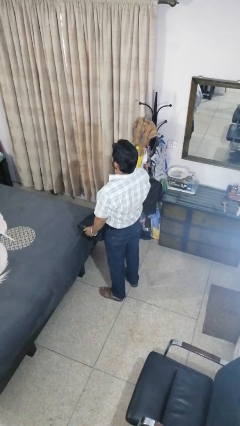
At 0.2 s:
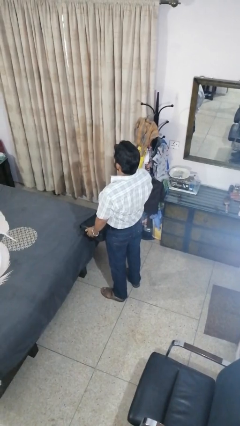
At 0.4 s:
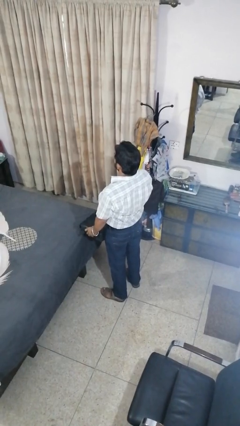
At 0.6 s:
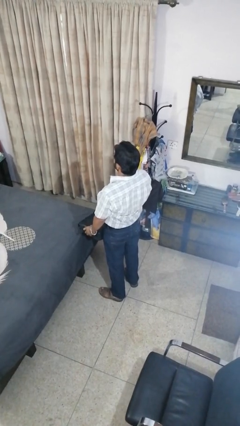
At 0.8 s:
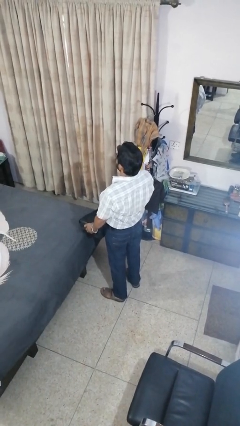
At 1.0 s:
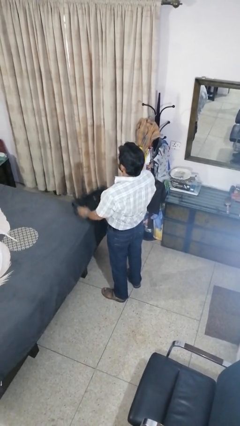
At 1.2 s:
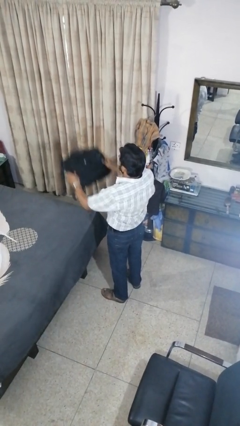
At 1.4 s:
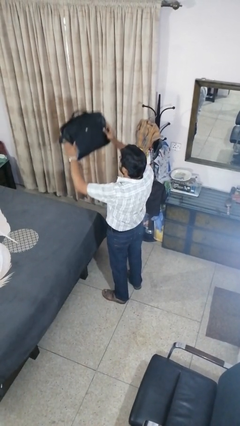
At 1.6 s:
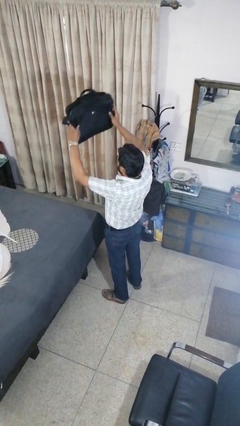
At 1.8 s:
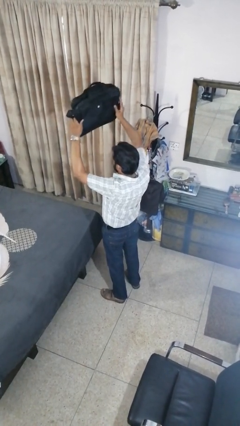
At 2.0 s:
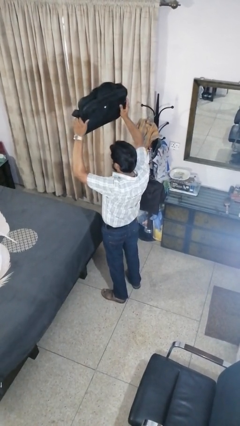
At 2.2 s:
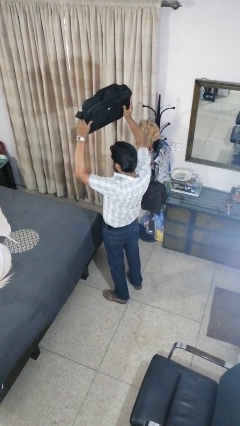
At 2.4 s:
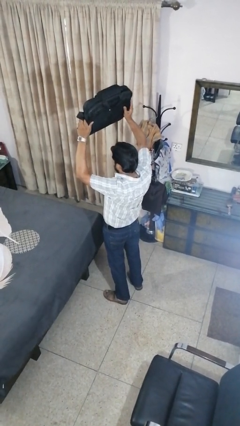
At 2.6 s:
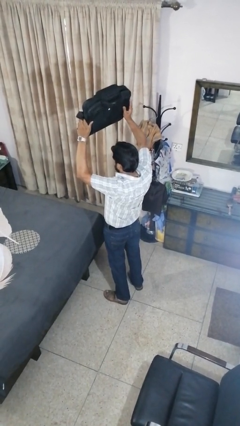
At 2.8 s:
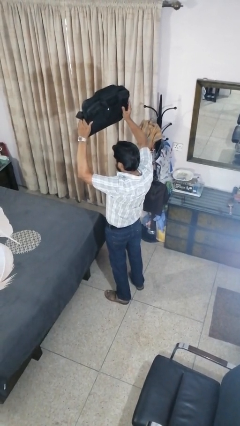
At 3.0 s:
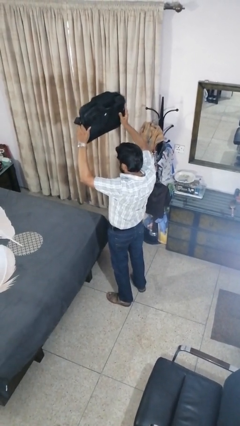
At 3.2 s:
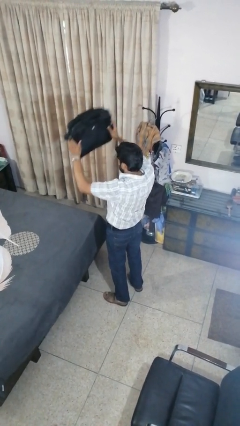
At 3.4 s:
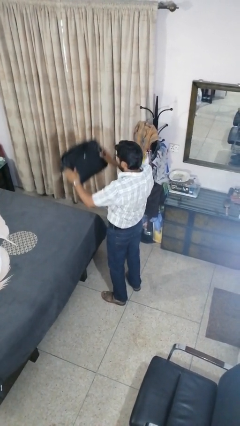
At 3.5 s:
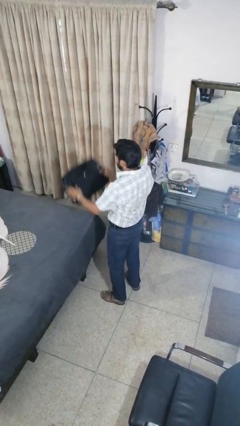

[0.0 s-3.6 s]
person holds object above head

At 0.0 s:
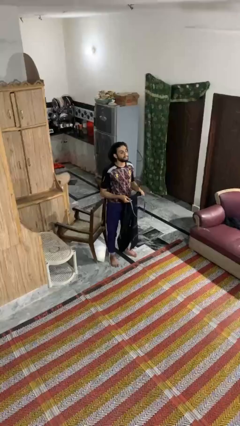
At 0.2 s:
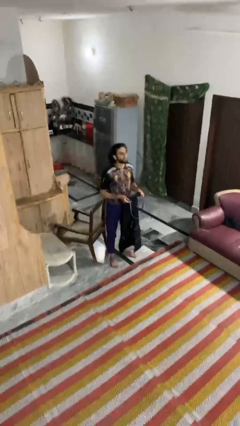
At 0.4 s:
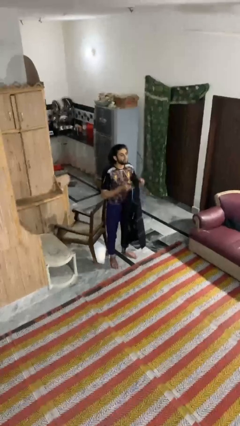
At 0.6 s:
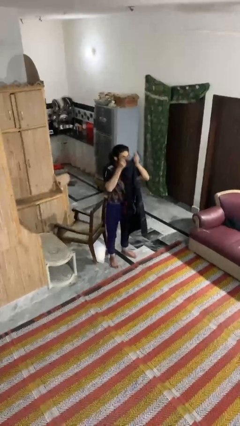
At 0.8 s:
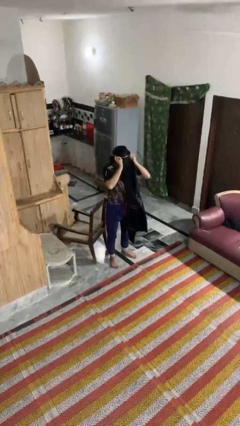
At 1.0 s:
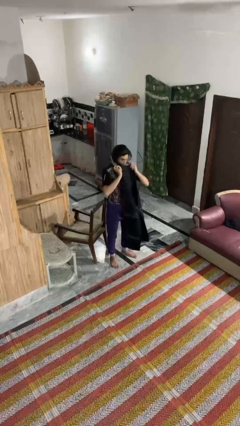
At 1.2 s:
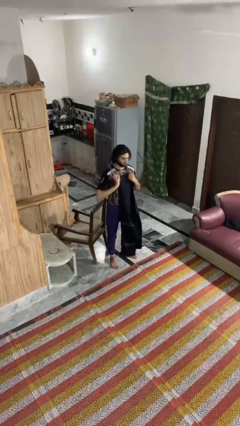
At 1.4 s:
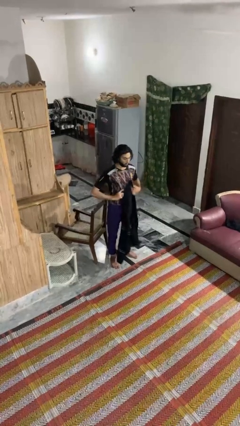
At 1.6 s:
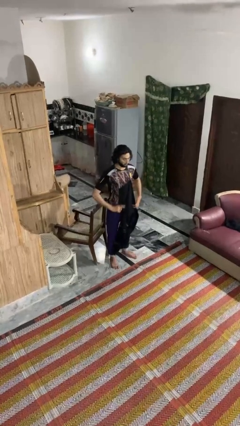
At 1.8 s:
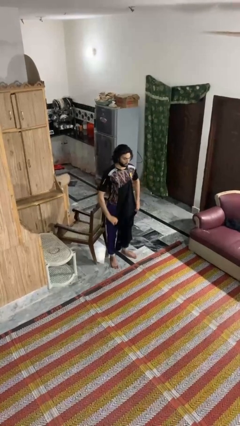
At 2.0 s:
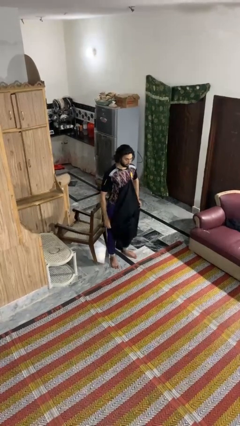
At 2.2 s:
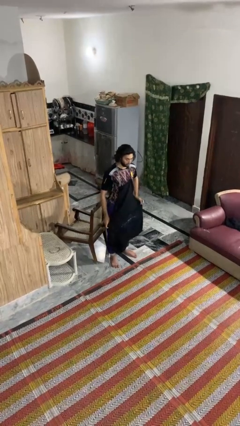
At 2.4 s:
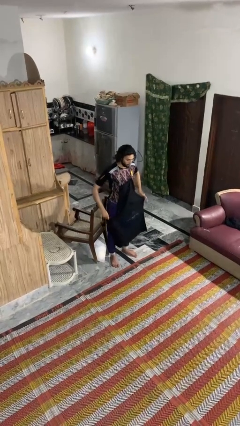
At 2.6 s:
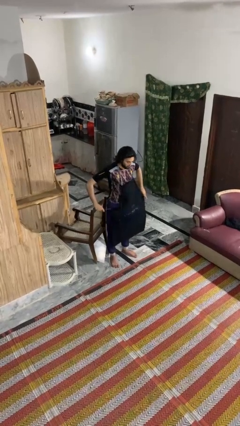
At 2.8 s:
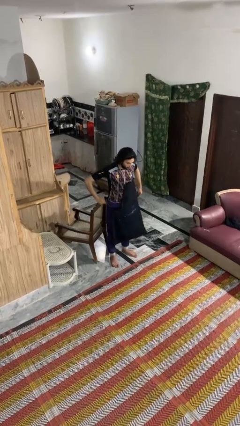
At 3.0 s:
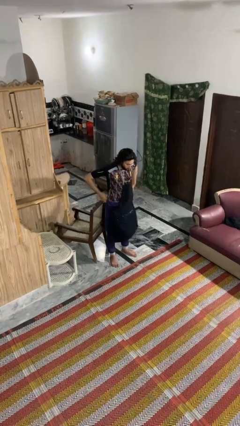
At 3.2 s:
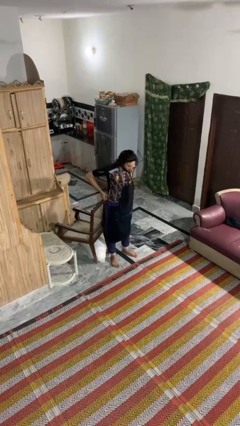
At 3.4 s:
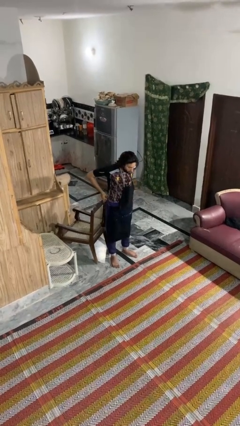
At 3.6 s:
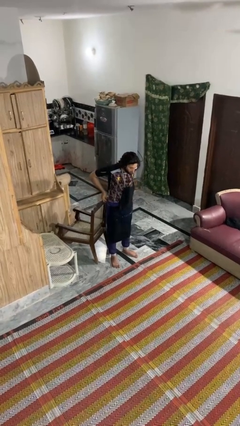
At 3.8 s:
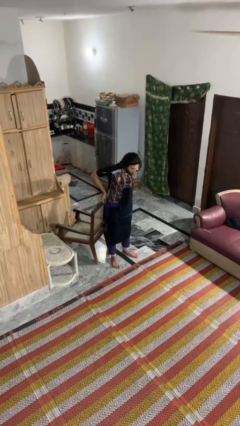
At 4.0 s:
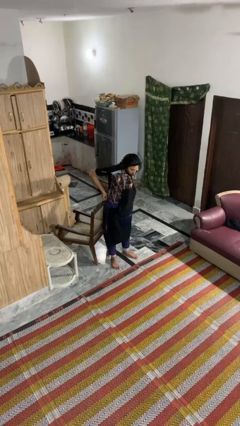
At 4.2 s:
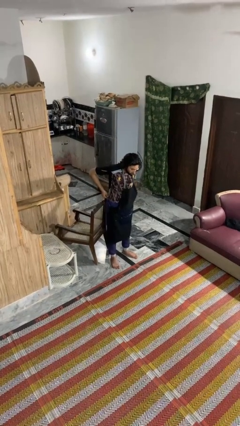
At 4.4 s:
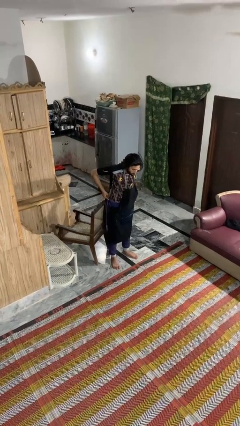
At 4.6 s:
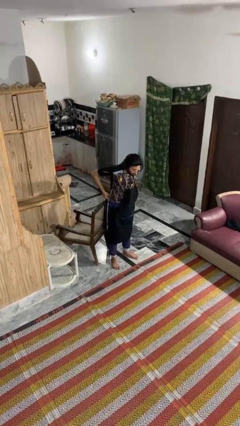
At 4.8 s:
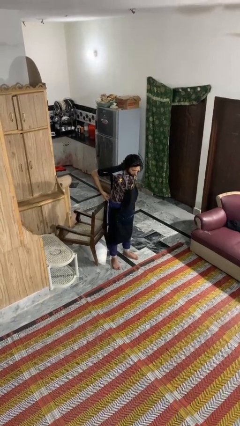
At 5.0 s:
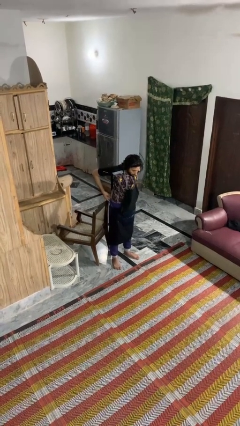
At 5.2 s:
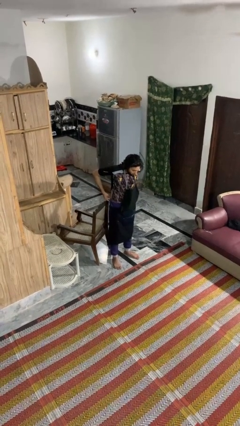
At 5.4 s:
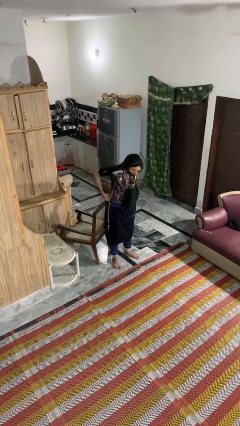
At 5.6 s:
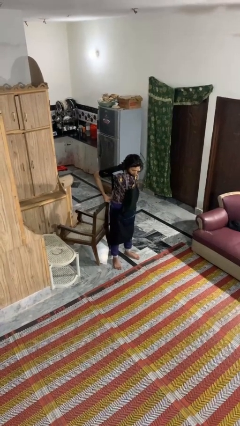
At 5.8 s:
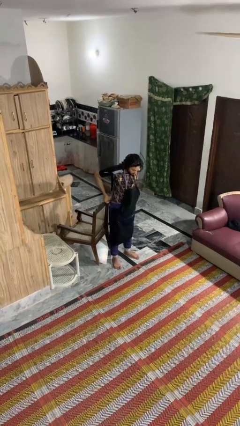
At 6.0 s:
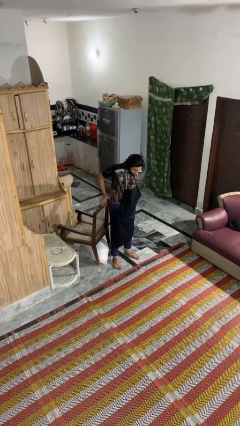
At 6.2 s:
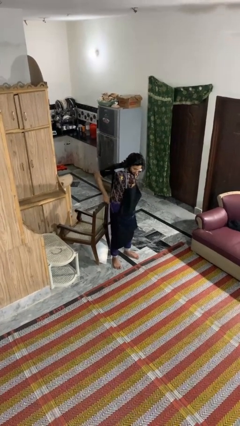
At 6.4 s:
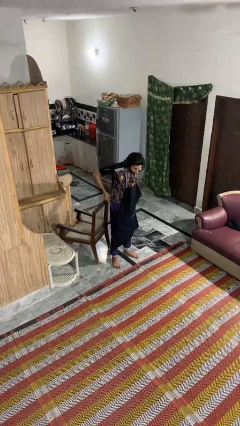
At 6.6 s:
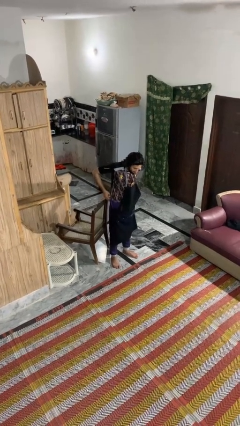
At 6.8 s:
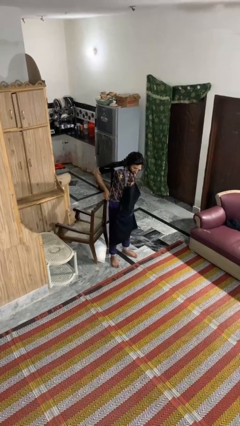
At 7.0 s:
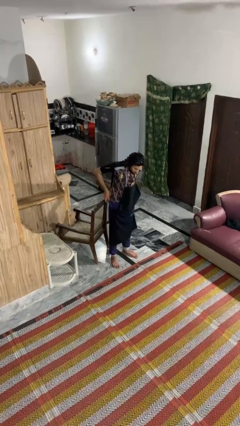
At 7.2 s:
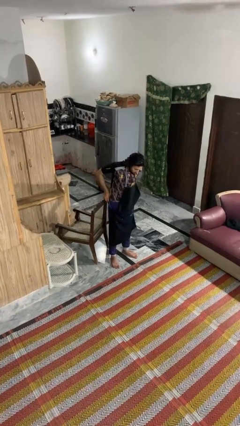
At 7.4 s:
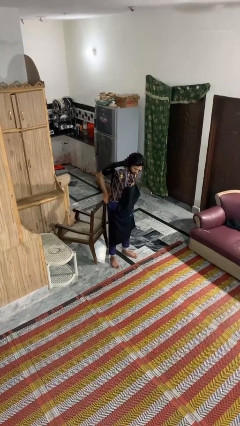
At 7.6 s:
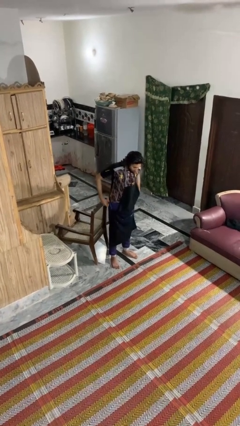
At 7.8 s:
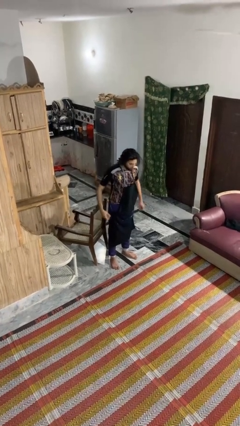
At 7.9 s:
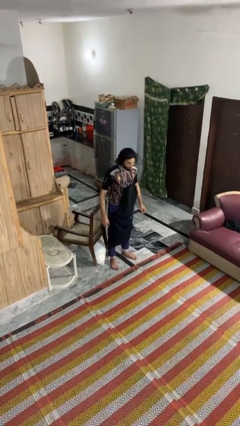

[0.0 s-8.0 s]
person puts on apron

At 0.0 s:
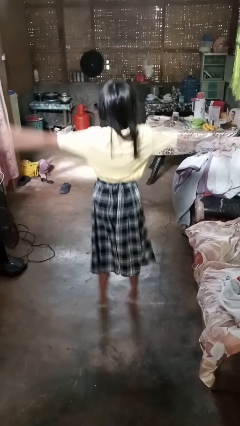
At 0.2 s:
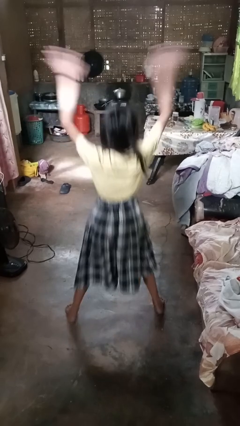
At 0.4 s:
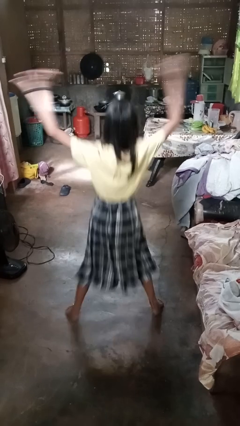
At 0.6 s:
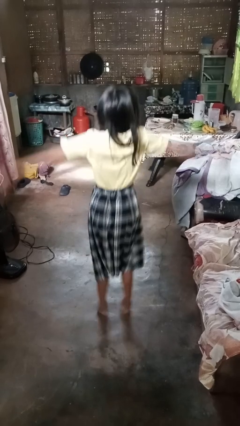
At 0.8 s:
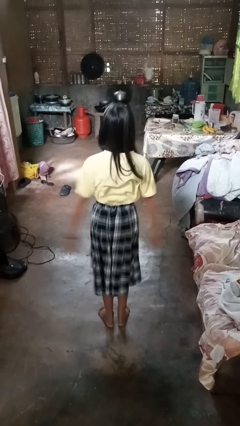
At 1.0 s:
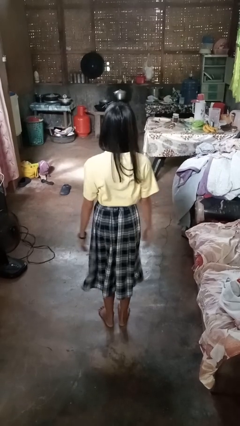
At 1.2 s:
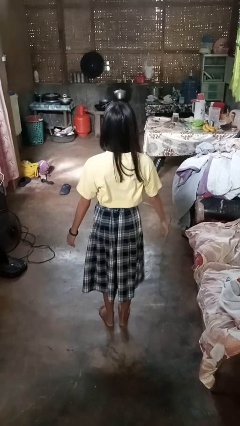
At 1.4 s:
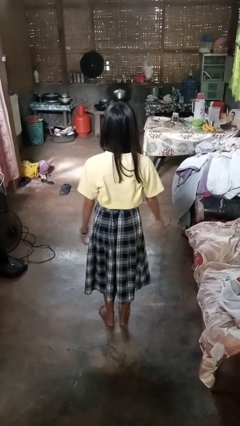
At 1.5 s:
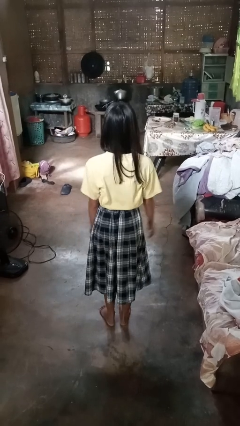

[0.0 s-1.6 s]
person exercises with jumping jacks

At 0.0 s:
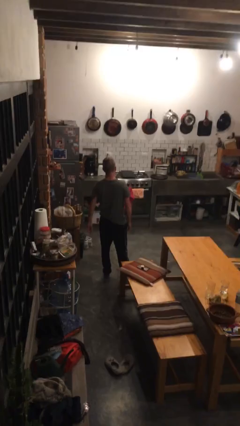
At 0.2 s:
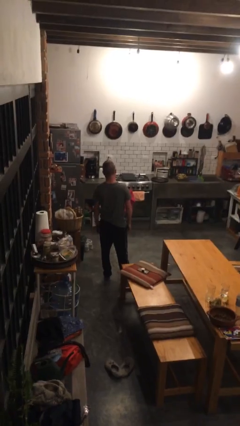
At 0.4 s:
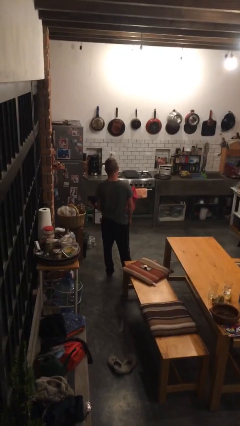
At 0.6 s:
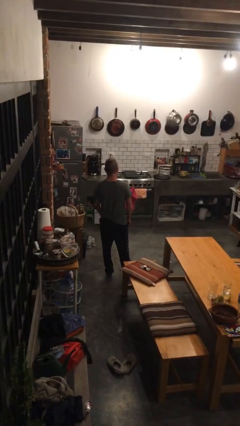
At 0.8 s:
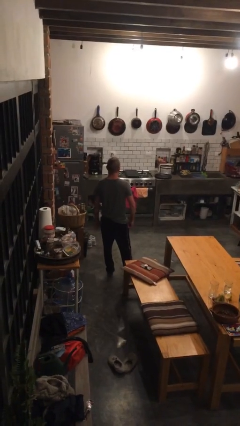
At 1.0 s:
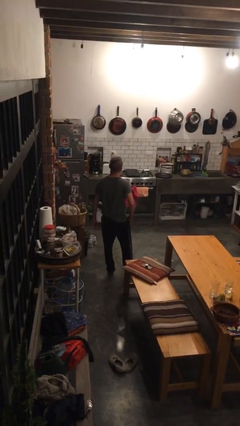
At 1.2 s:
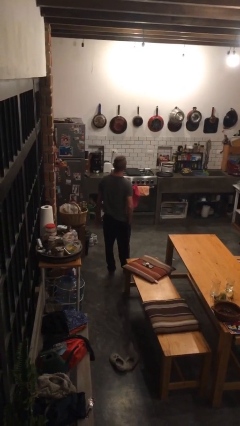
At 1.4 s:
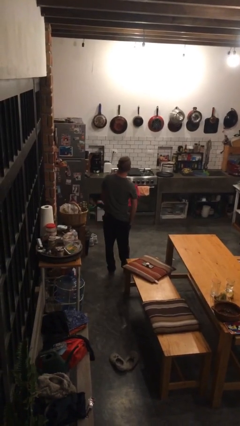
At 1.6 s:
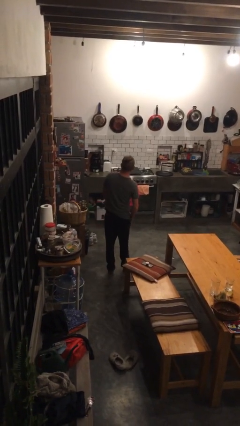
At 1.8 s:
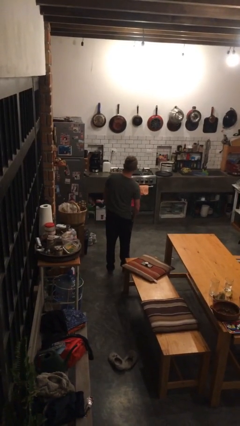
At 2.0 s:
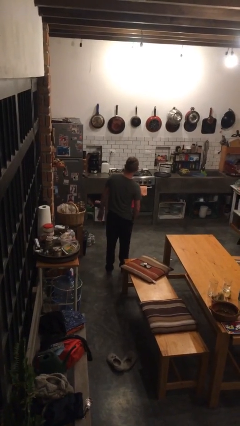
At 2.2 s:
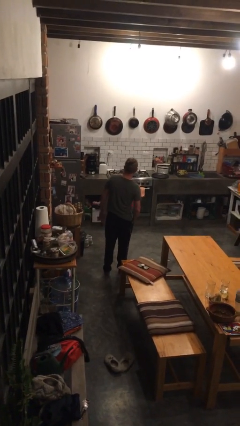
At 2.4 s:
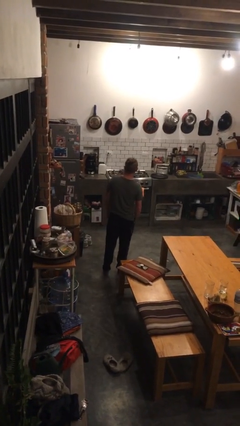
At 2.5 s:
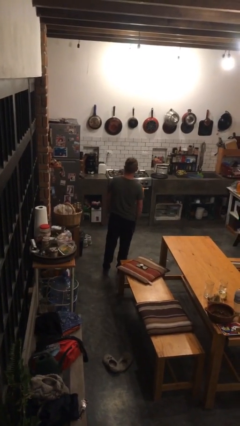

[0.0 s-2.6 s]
person puts hands in back pockets

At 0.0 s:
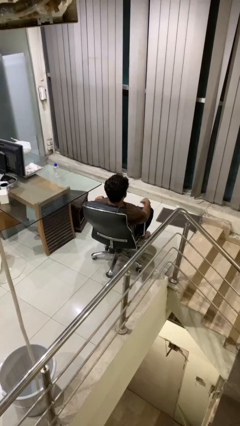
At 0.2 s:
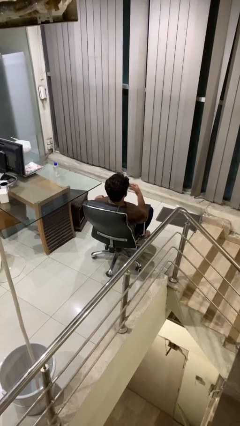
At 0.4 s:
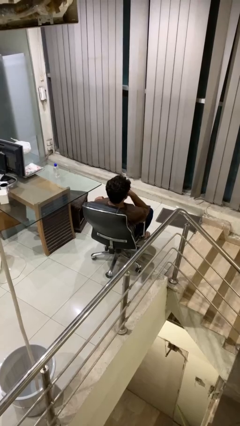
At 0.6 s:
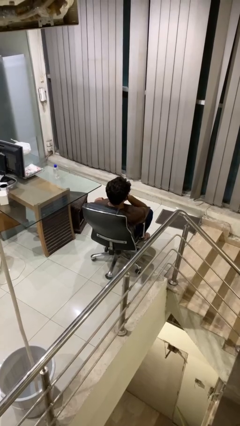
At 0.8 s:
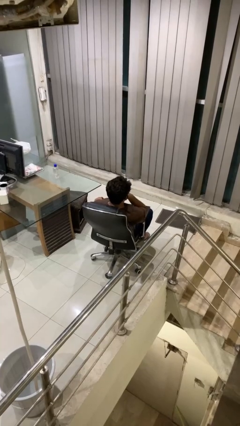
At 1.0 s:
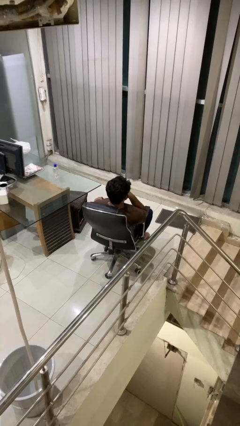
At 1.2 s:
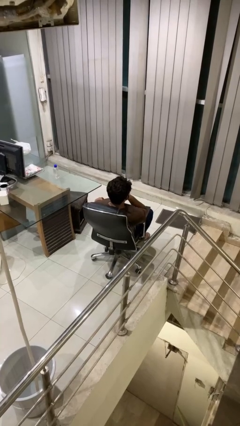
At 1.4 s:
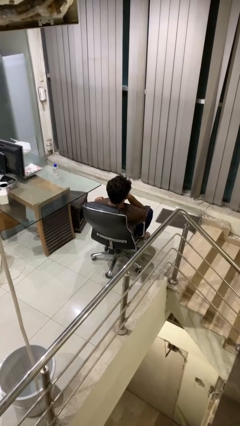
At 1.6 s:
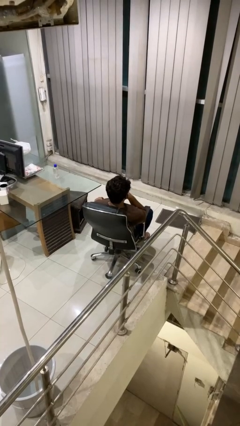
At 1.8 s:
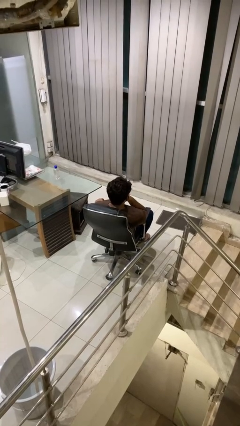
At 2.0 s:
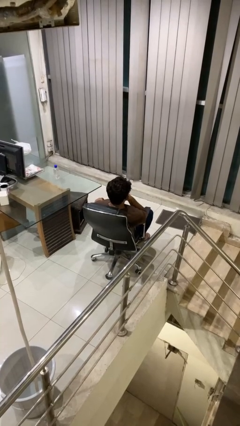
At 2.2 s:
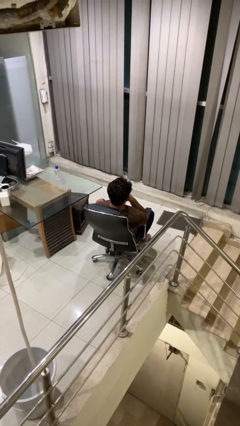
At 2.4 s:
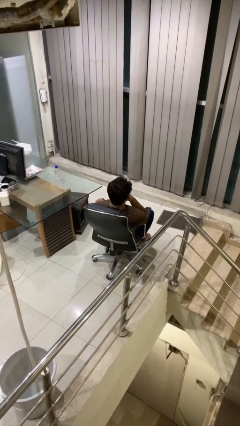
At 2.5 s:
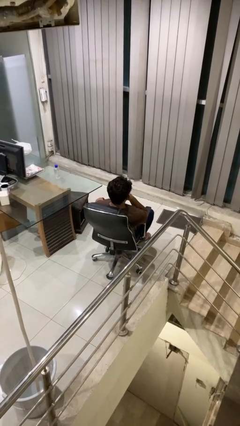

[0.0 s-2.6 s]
person strokes chin
